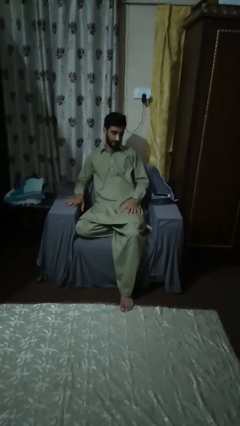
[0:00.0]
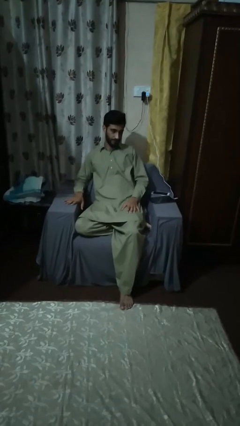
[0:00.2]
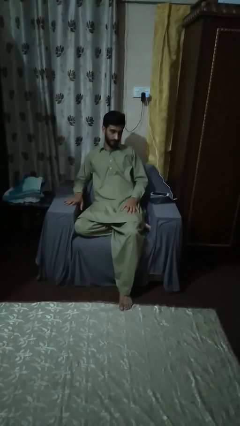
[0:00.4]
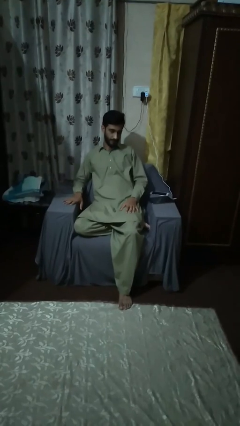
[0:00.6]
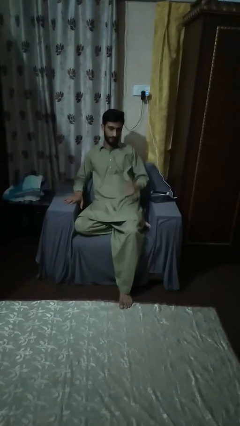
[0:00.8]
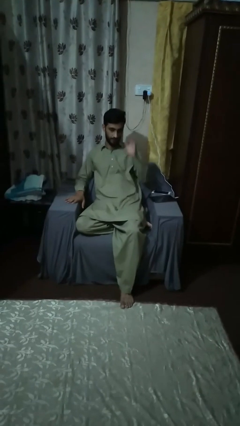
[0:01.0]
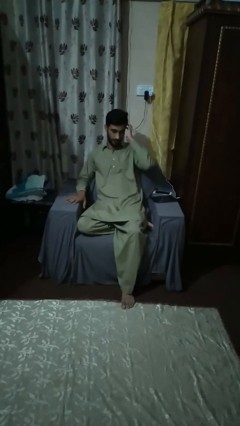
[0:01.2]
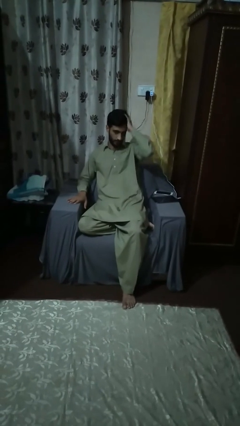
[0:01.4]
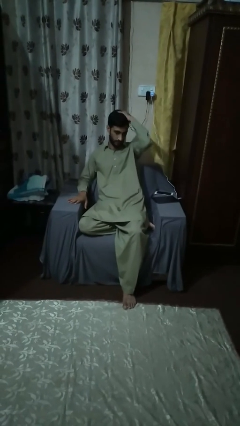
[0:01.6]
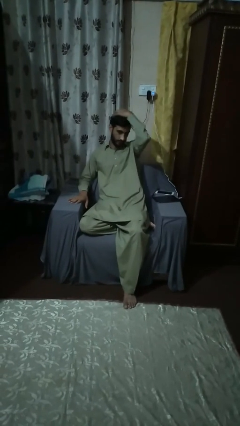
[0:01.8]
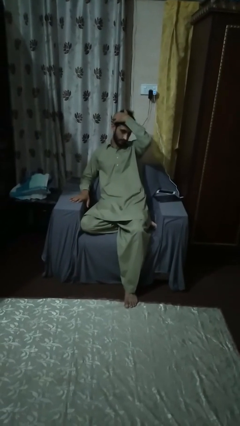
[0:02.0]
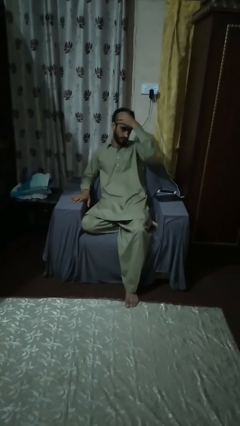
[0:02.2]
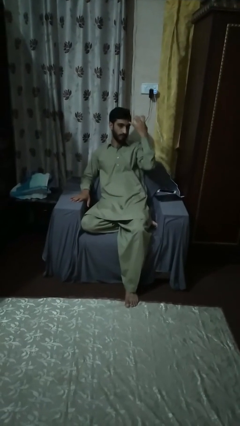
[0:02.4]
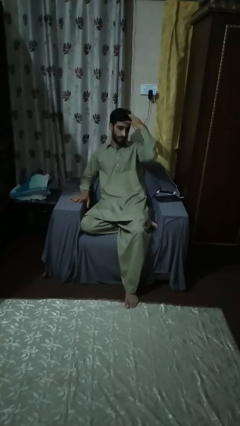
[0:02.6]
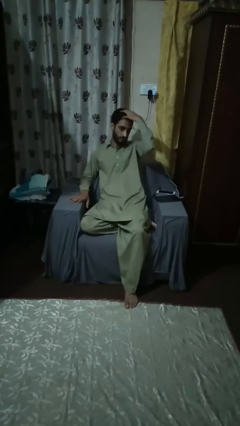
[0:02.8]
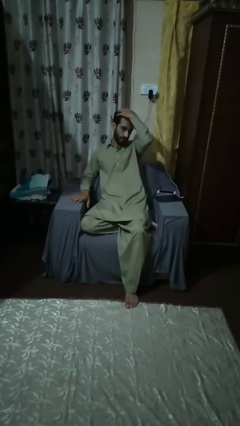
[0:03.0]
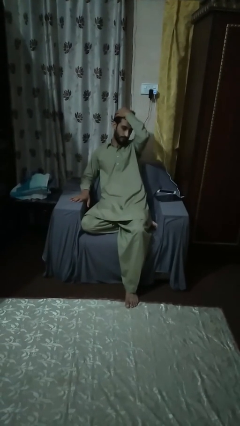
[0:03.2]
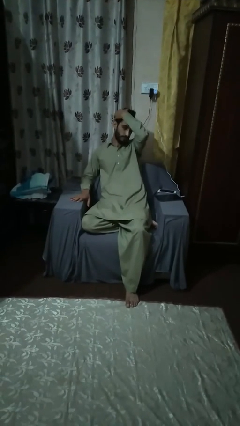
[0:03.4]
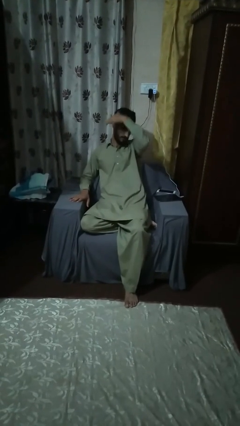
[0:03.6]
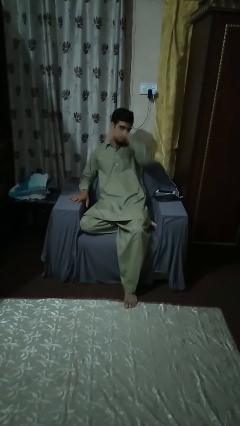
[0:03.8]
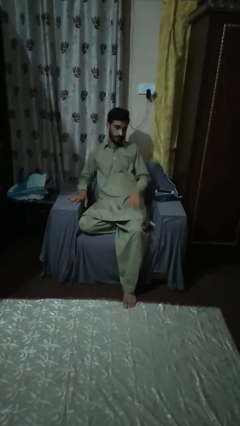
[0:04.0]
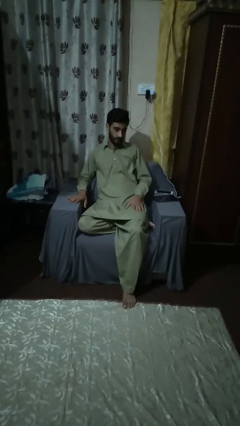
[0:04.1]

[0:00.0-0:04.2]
person strokes hair

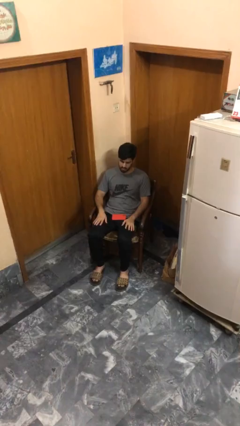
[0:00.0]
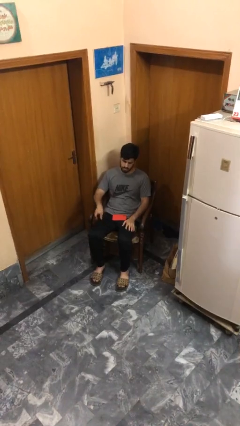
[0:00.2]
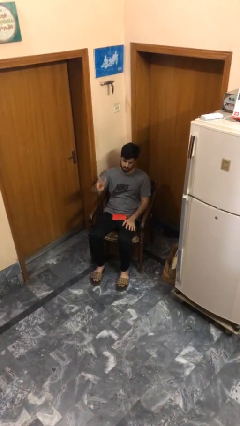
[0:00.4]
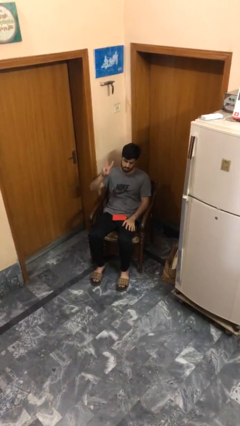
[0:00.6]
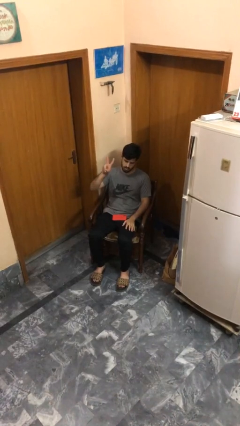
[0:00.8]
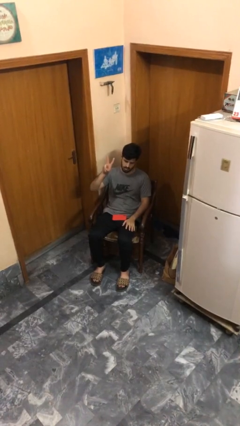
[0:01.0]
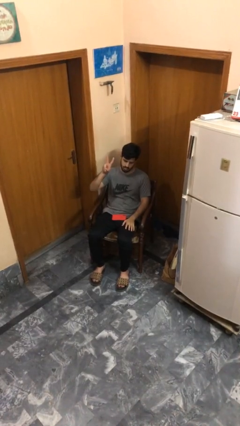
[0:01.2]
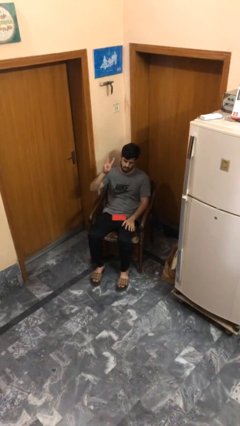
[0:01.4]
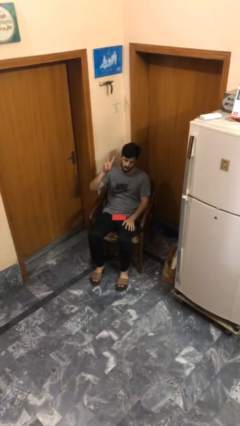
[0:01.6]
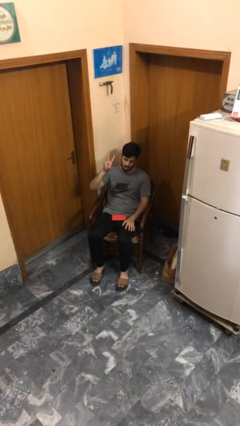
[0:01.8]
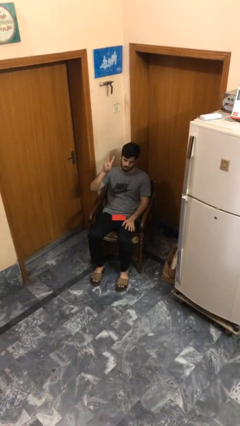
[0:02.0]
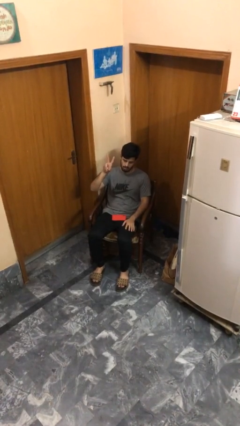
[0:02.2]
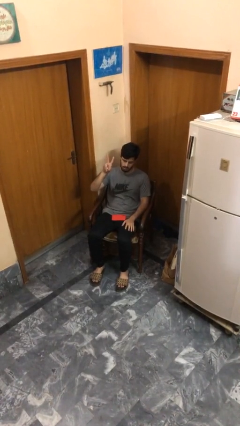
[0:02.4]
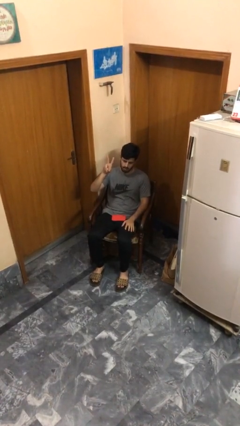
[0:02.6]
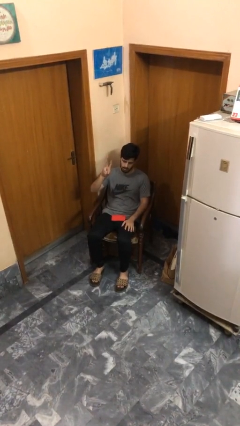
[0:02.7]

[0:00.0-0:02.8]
person gestures peace

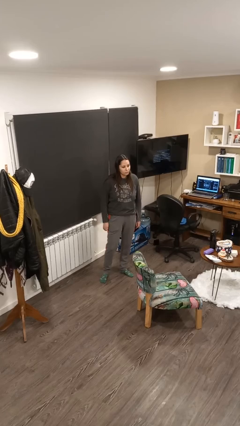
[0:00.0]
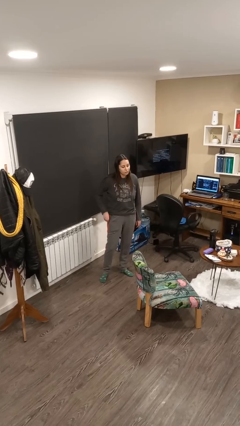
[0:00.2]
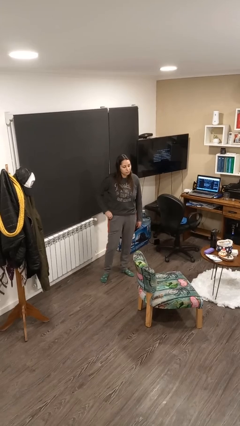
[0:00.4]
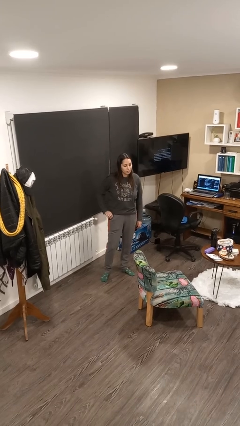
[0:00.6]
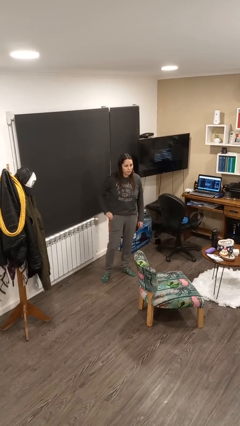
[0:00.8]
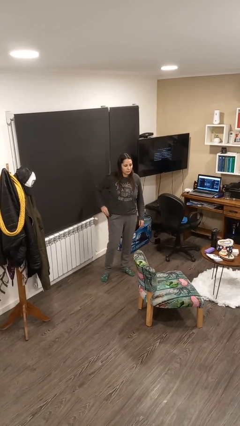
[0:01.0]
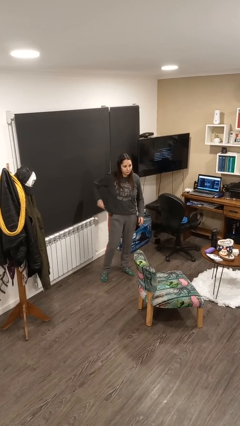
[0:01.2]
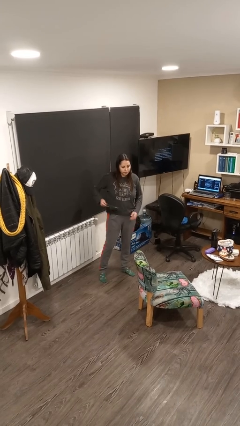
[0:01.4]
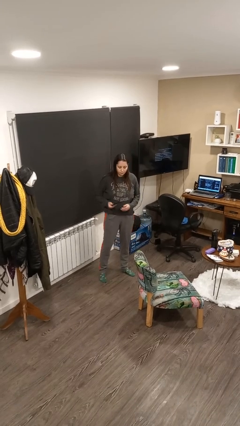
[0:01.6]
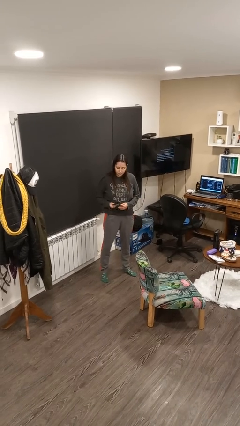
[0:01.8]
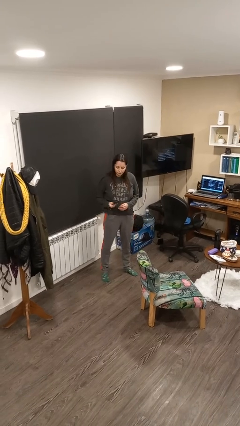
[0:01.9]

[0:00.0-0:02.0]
person takes phone from pocket

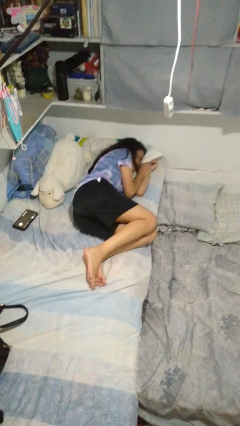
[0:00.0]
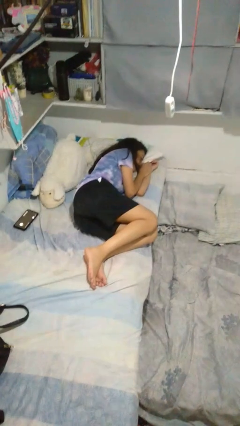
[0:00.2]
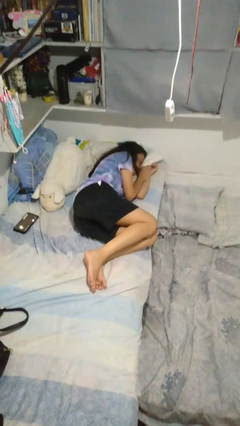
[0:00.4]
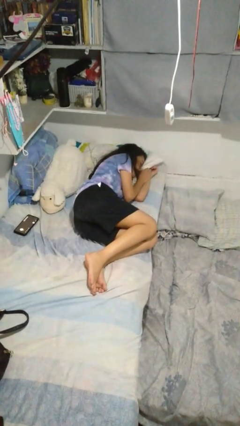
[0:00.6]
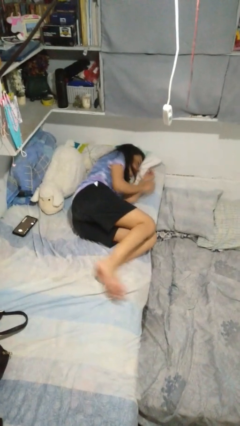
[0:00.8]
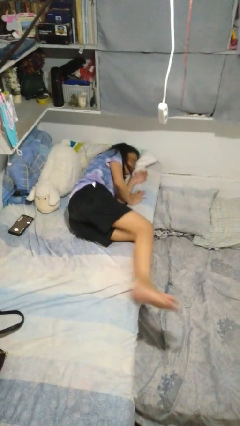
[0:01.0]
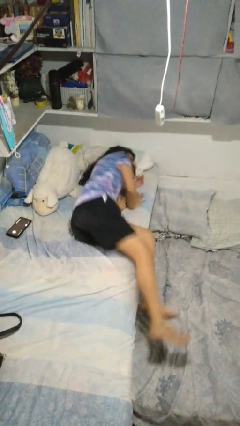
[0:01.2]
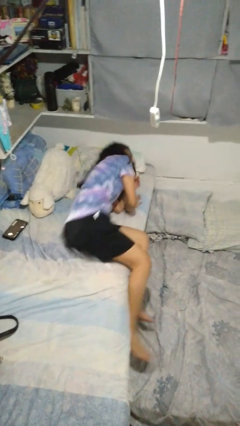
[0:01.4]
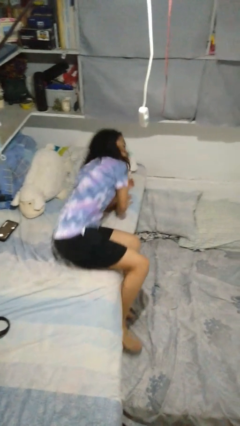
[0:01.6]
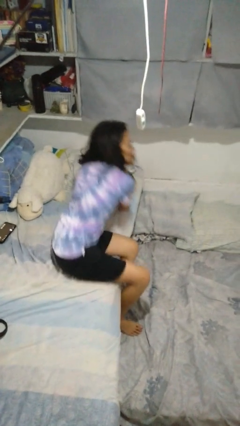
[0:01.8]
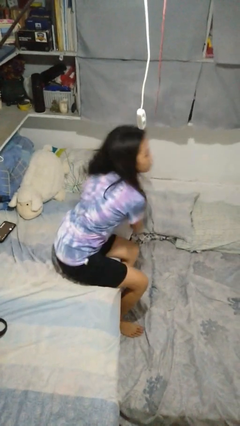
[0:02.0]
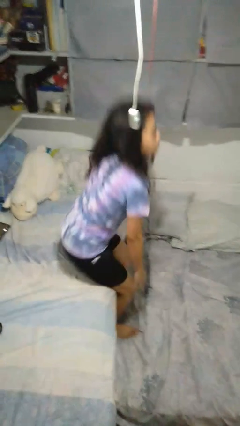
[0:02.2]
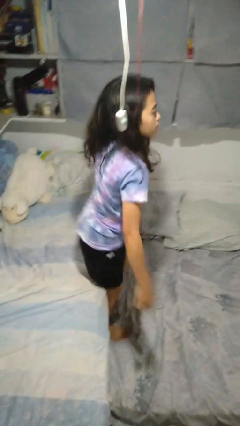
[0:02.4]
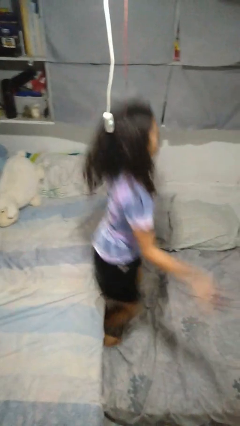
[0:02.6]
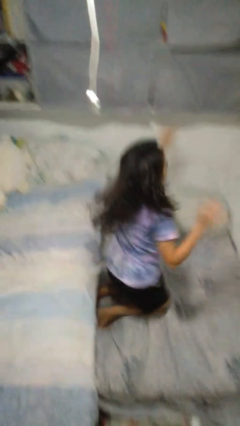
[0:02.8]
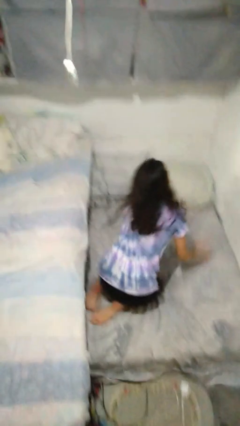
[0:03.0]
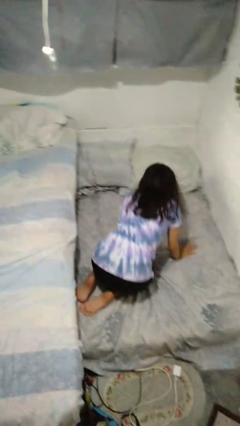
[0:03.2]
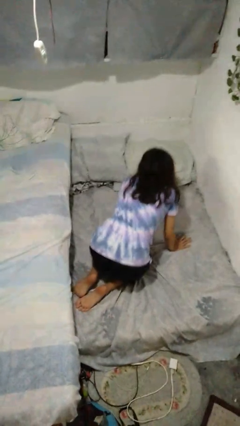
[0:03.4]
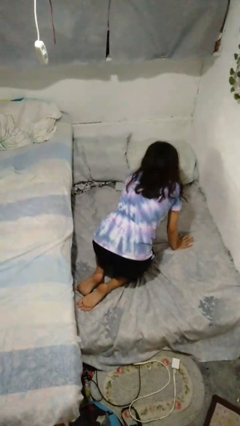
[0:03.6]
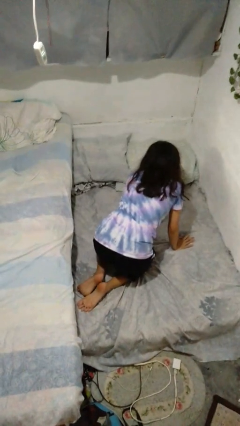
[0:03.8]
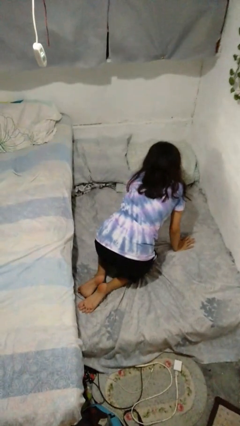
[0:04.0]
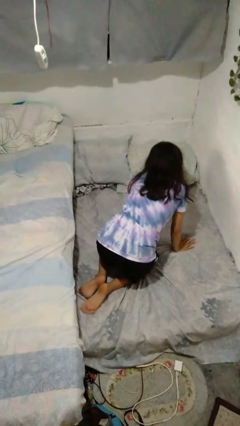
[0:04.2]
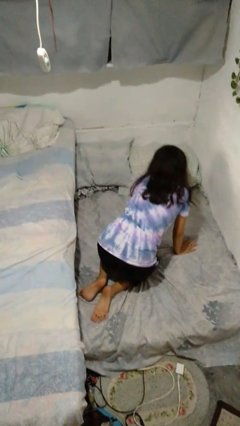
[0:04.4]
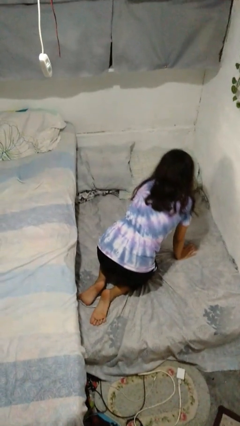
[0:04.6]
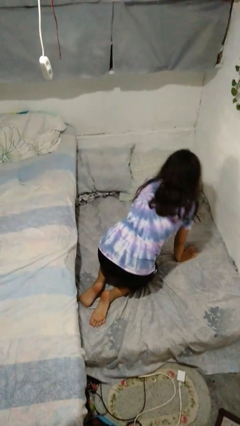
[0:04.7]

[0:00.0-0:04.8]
person falls from bed

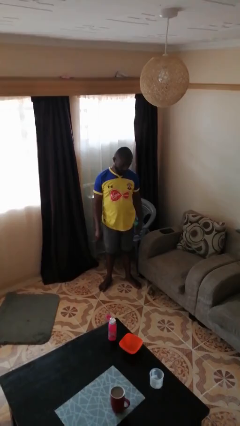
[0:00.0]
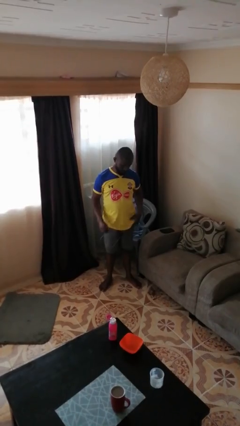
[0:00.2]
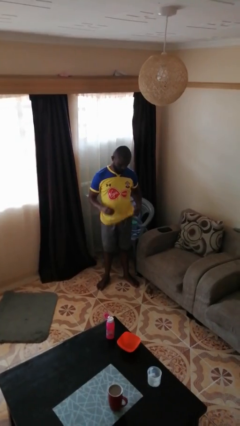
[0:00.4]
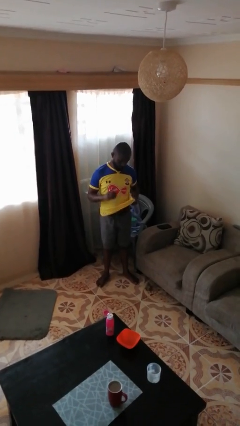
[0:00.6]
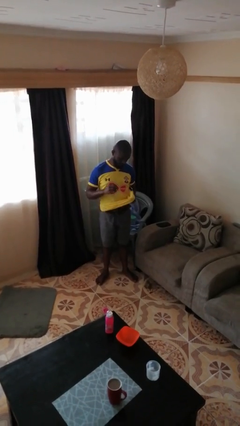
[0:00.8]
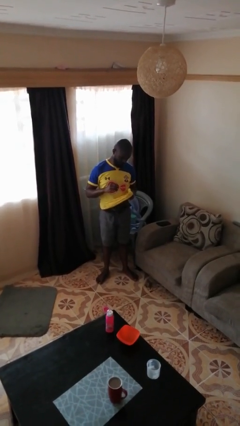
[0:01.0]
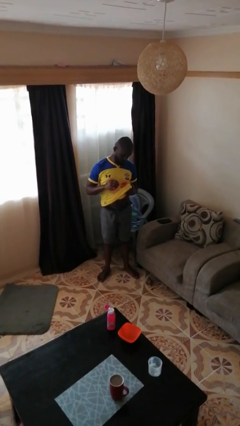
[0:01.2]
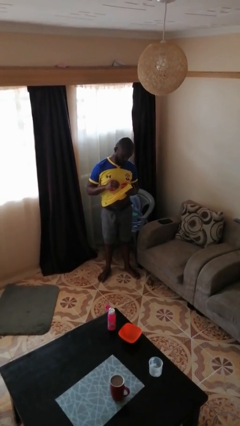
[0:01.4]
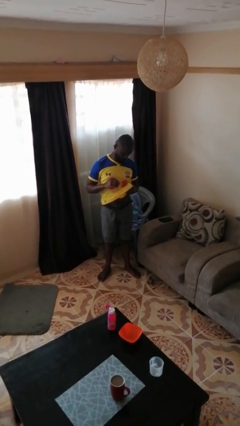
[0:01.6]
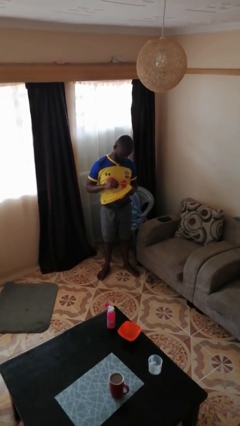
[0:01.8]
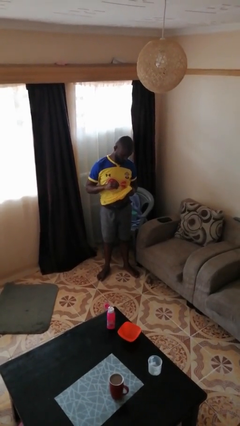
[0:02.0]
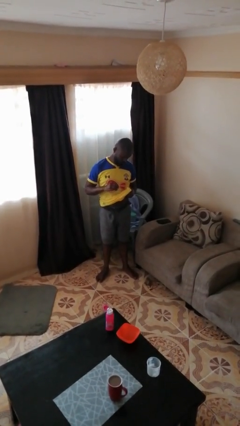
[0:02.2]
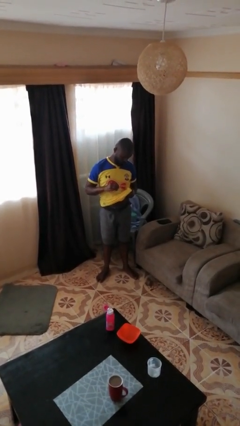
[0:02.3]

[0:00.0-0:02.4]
person cleans eyeglasses

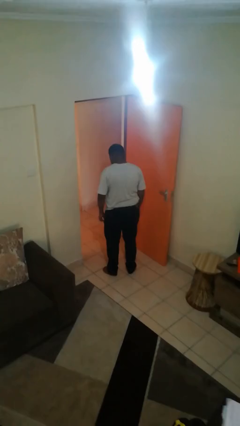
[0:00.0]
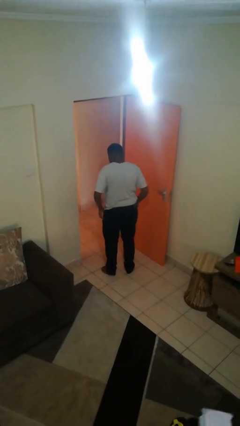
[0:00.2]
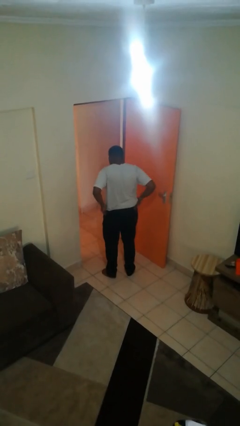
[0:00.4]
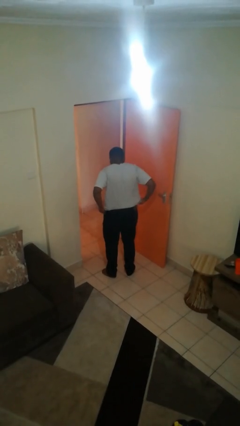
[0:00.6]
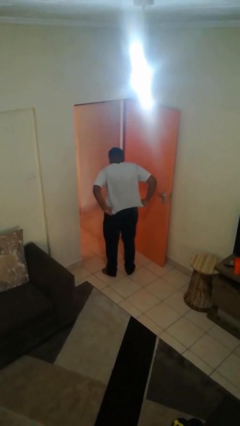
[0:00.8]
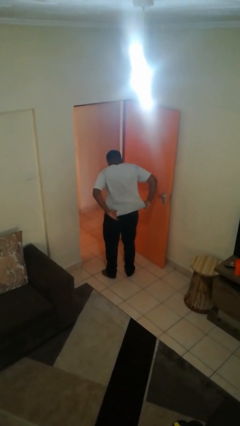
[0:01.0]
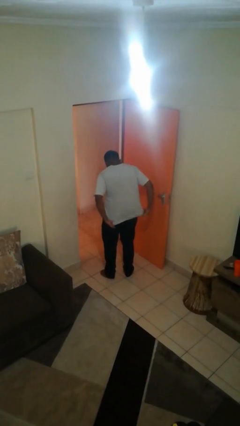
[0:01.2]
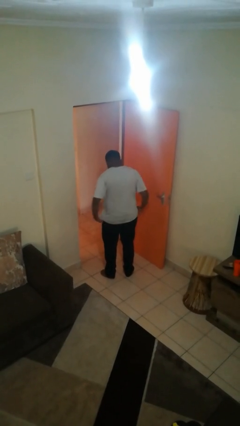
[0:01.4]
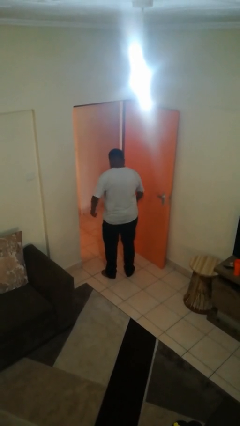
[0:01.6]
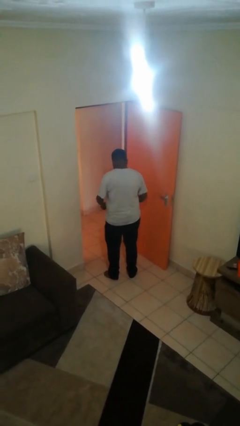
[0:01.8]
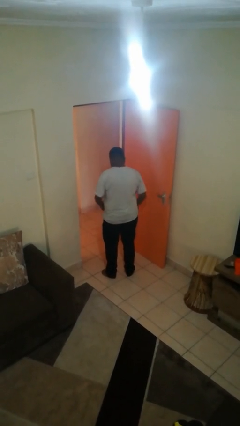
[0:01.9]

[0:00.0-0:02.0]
person untucks shirt
